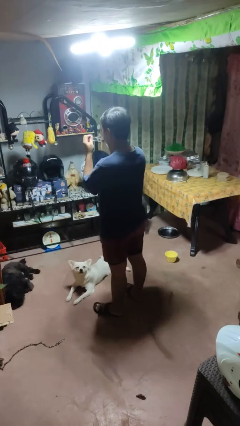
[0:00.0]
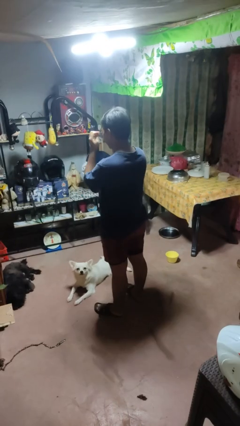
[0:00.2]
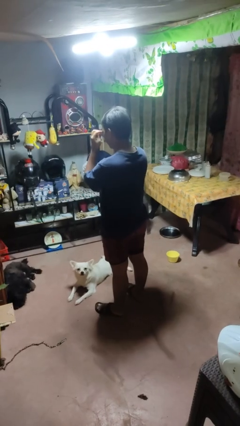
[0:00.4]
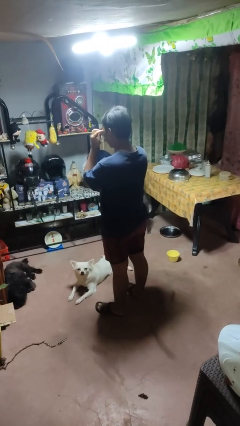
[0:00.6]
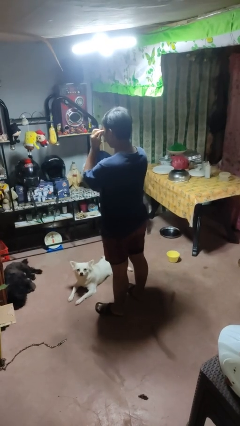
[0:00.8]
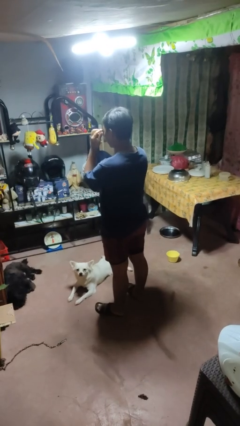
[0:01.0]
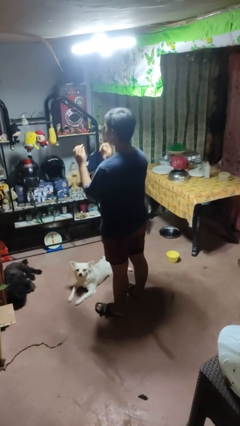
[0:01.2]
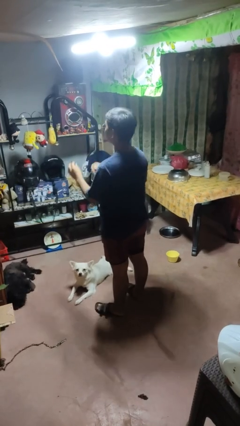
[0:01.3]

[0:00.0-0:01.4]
person puts on sunglasses

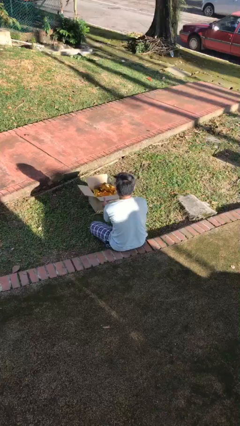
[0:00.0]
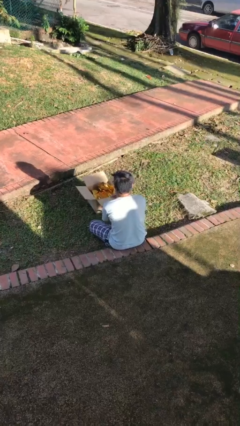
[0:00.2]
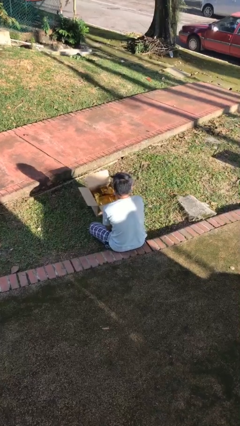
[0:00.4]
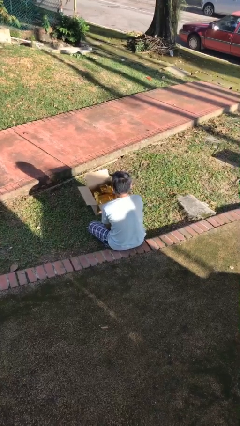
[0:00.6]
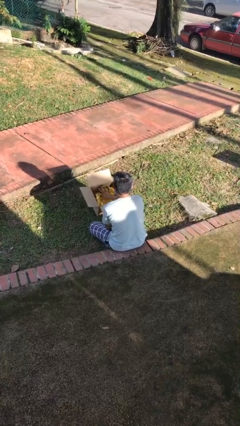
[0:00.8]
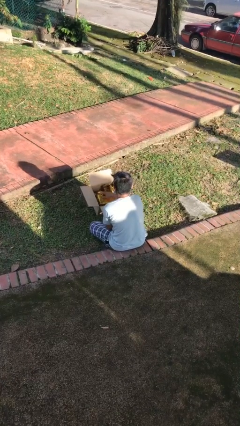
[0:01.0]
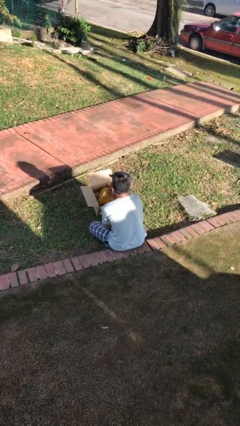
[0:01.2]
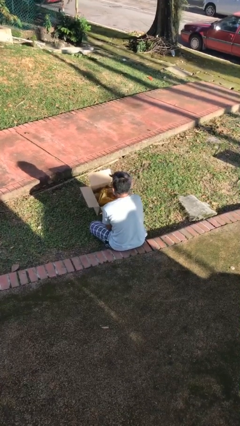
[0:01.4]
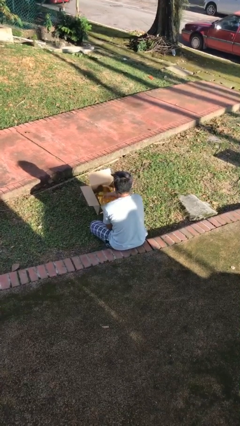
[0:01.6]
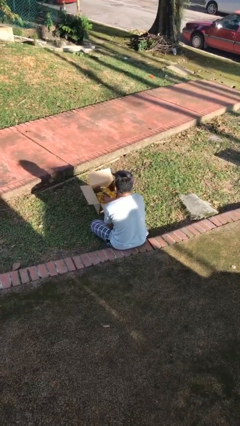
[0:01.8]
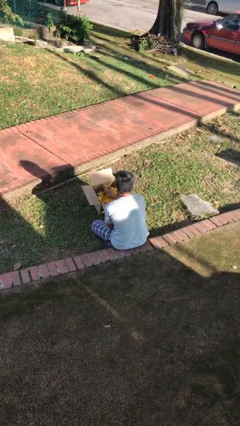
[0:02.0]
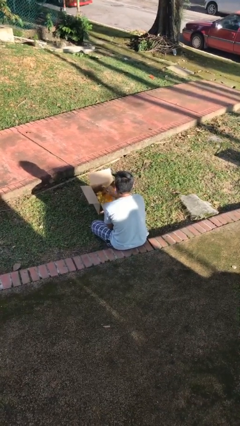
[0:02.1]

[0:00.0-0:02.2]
person searches in box

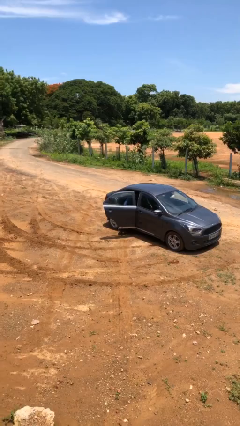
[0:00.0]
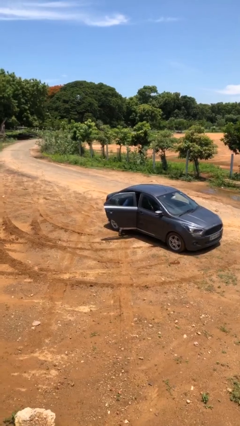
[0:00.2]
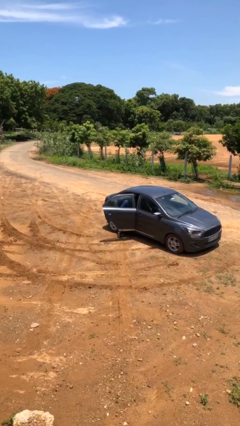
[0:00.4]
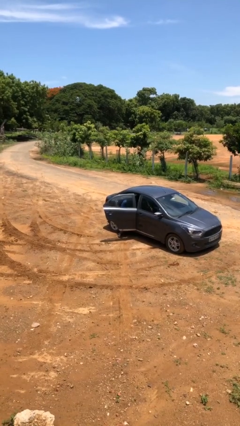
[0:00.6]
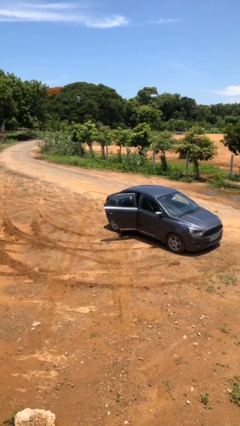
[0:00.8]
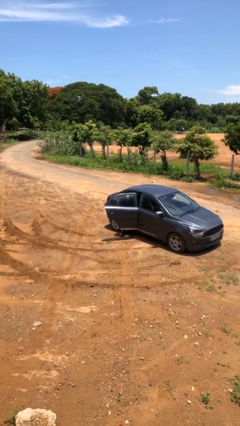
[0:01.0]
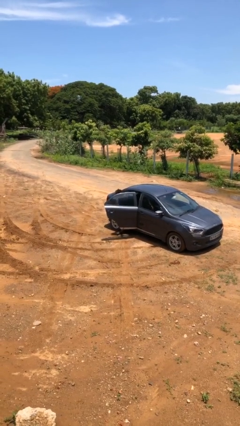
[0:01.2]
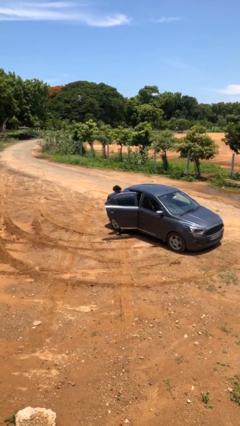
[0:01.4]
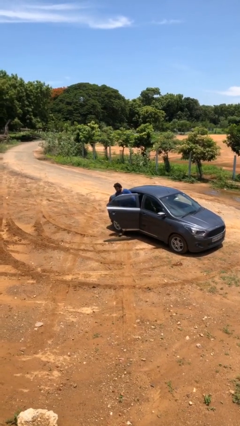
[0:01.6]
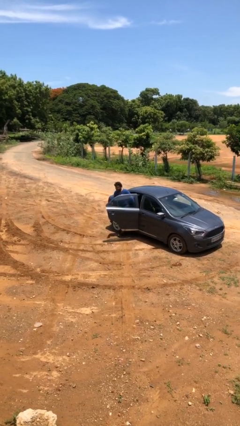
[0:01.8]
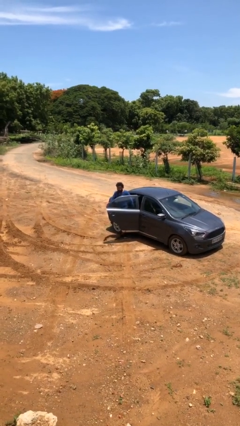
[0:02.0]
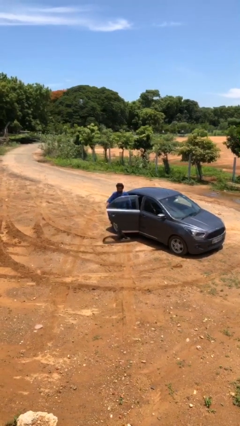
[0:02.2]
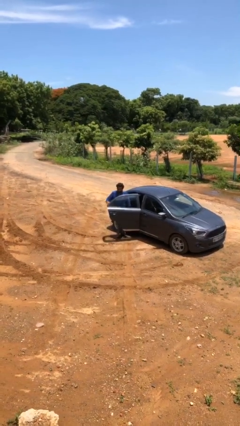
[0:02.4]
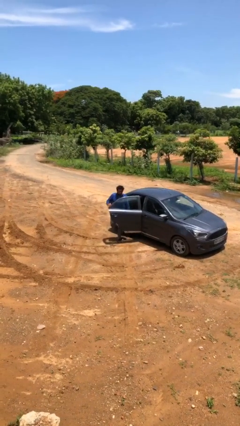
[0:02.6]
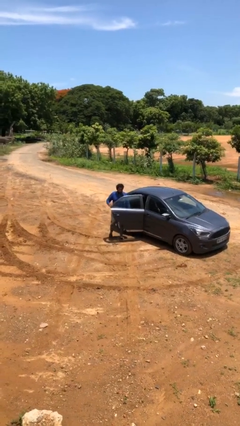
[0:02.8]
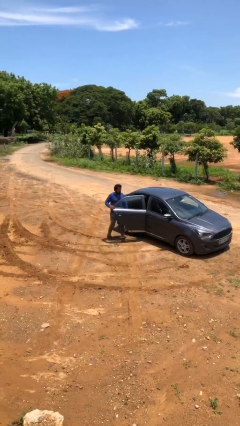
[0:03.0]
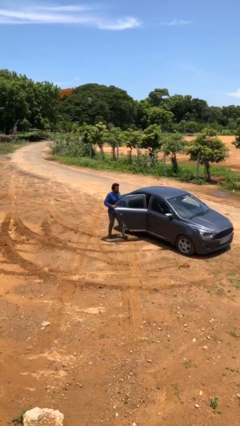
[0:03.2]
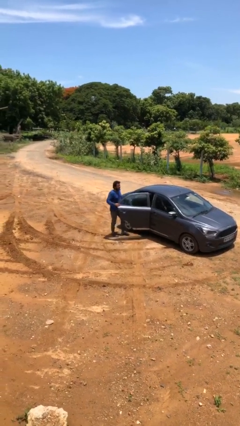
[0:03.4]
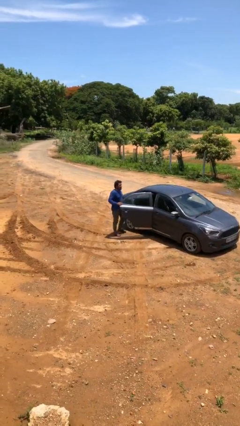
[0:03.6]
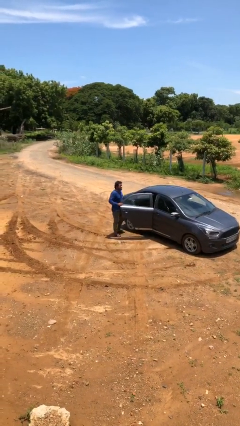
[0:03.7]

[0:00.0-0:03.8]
person exits car

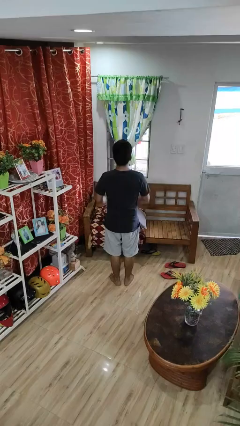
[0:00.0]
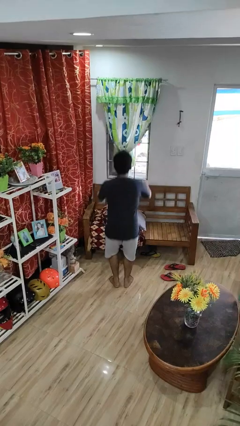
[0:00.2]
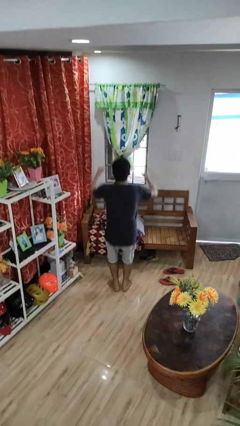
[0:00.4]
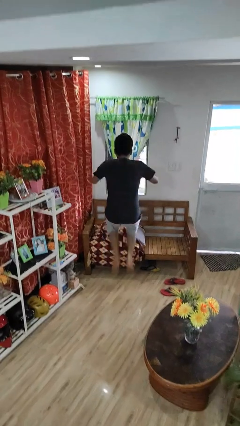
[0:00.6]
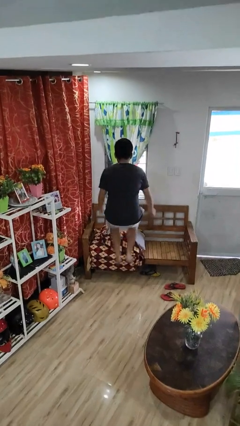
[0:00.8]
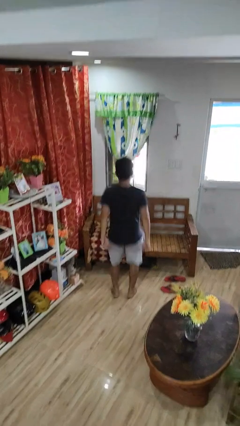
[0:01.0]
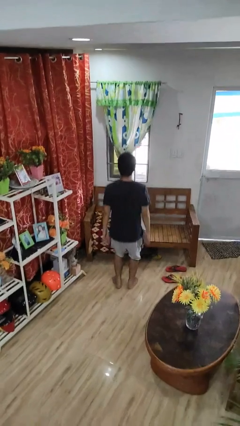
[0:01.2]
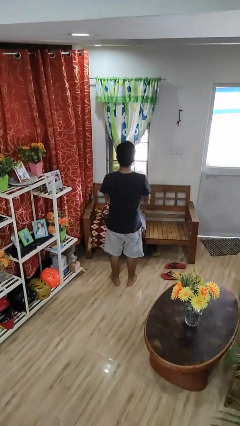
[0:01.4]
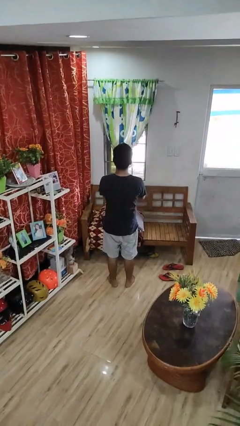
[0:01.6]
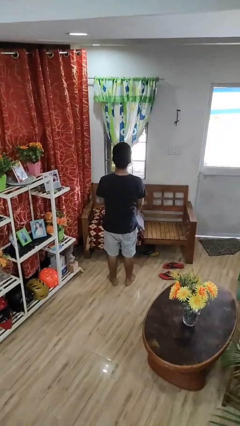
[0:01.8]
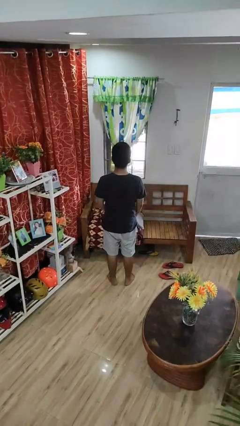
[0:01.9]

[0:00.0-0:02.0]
person jumps

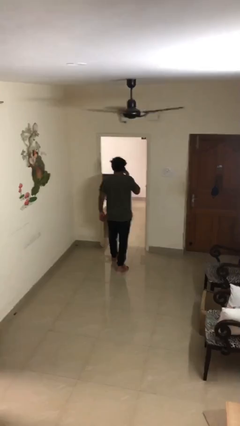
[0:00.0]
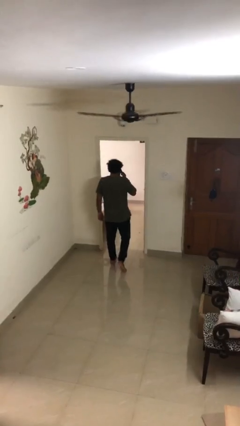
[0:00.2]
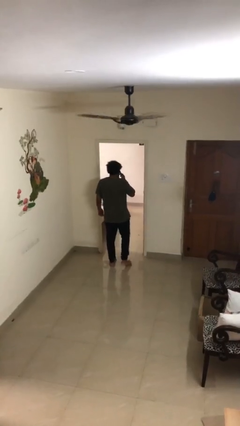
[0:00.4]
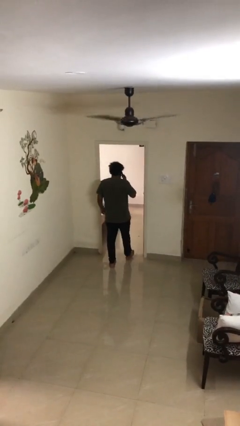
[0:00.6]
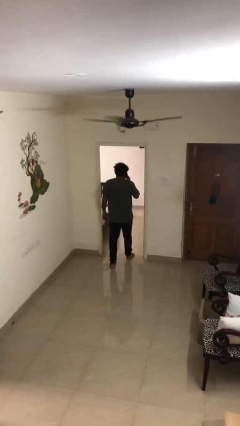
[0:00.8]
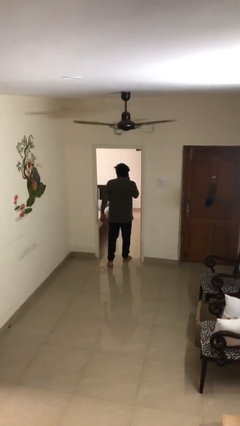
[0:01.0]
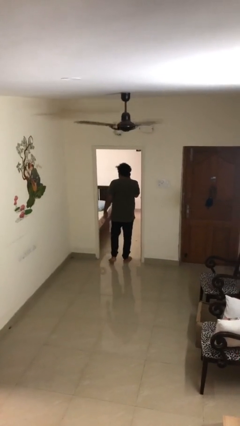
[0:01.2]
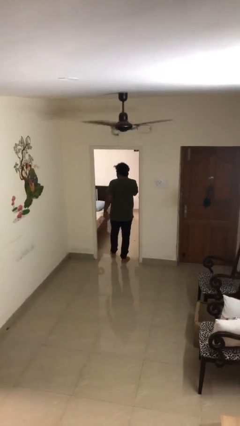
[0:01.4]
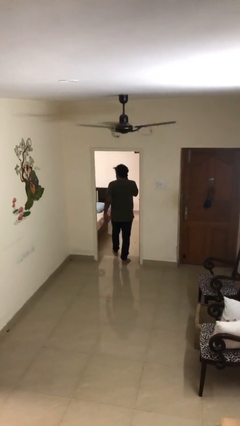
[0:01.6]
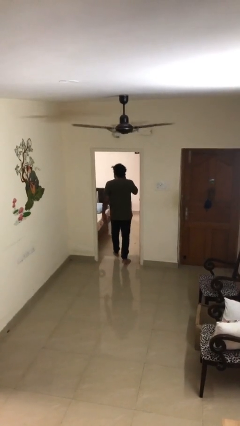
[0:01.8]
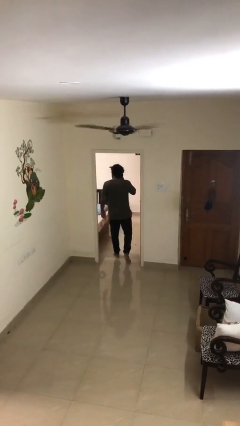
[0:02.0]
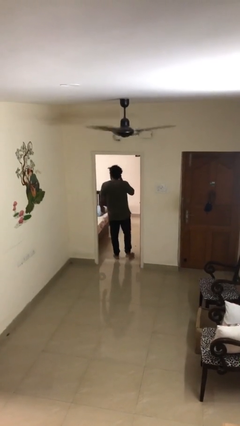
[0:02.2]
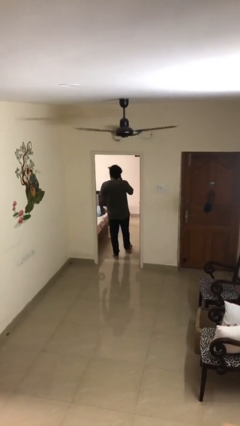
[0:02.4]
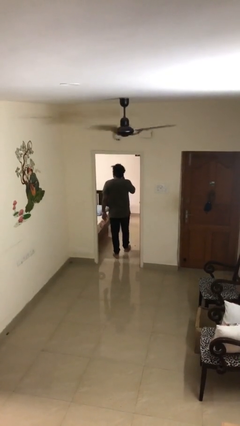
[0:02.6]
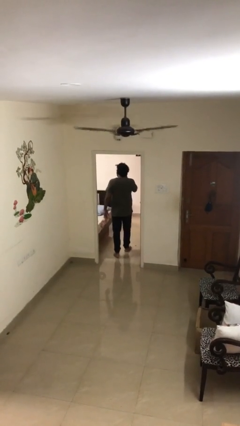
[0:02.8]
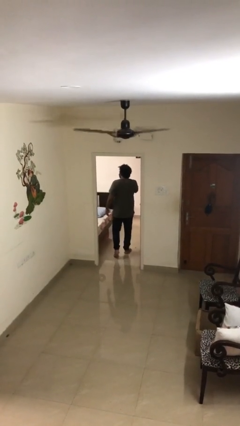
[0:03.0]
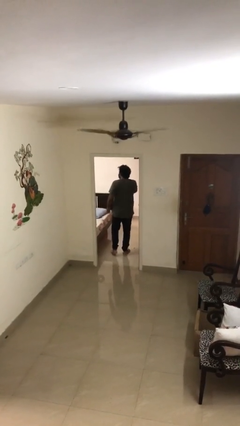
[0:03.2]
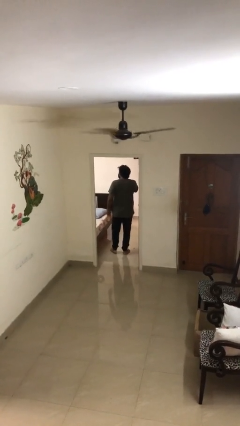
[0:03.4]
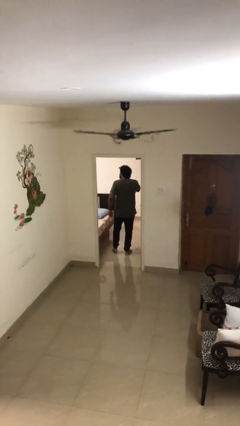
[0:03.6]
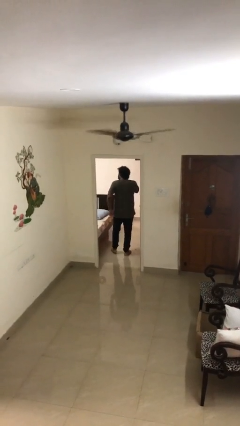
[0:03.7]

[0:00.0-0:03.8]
person exits scene through structure

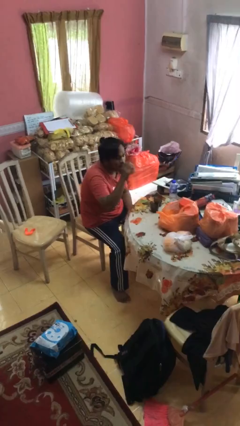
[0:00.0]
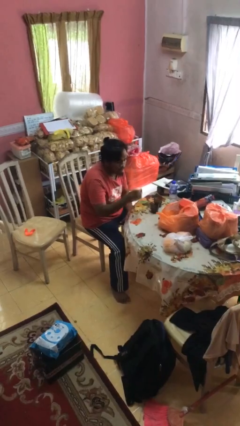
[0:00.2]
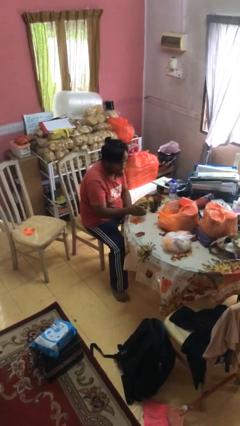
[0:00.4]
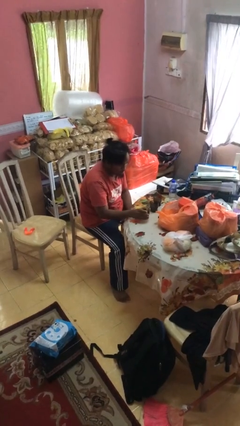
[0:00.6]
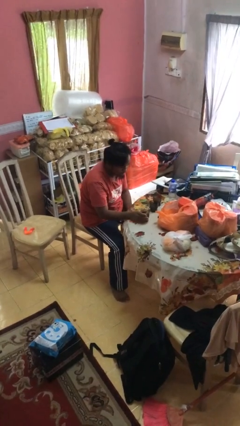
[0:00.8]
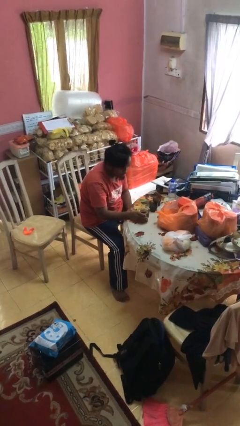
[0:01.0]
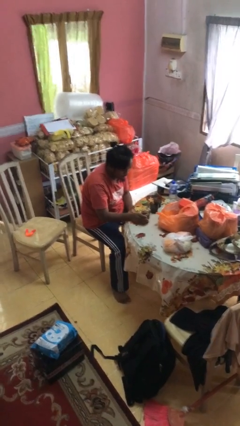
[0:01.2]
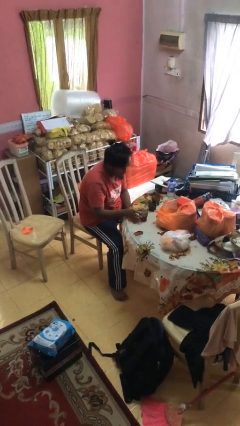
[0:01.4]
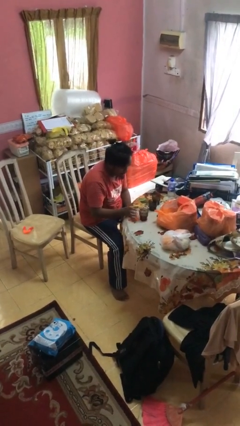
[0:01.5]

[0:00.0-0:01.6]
person puts down object on table

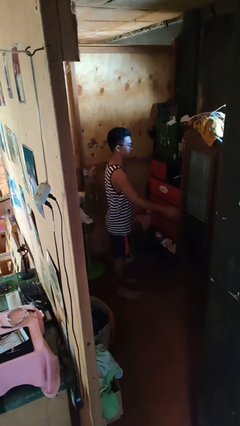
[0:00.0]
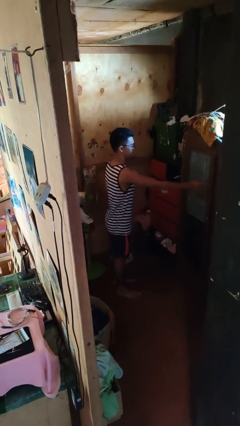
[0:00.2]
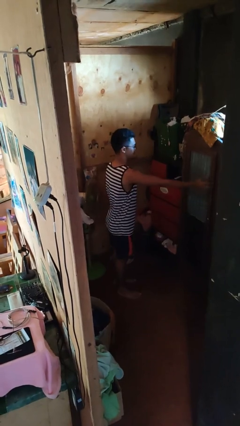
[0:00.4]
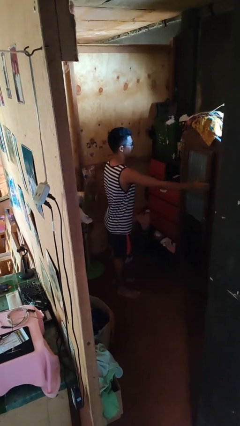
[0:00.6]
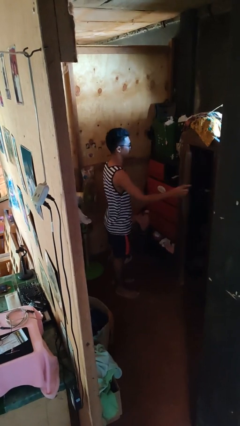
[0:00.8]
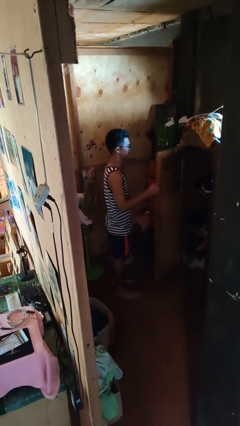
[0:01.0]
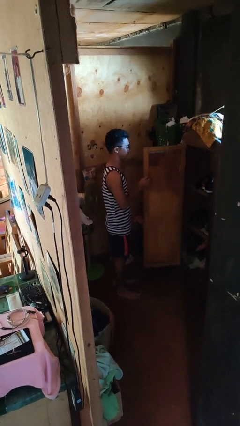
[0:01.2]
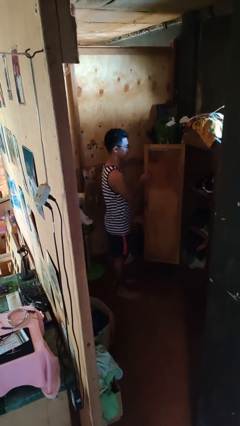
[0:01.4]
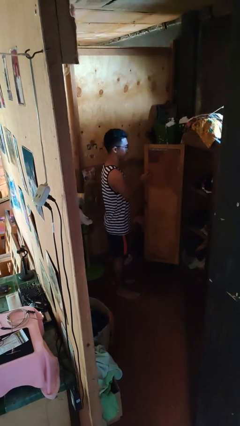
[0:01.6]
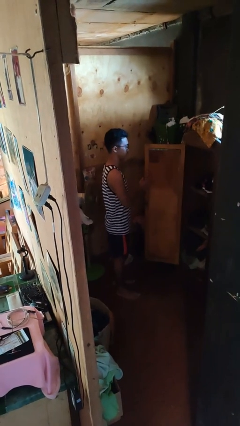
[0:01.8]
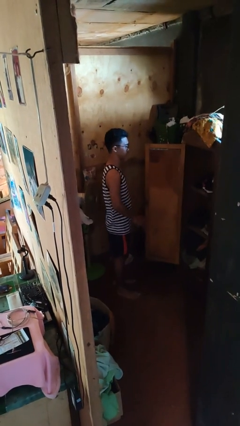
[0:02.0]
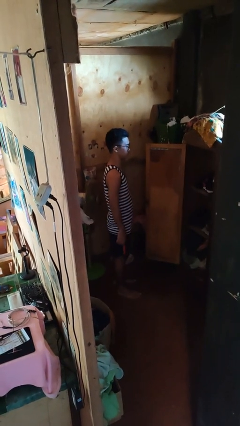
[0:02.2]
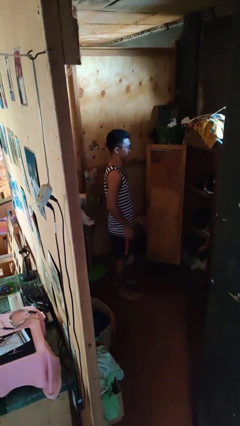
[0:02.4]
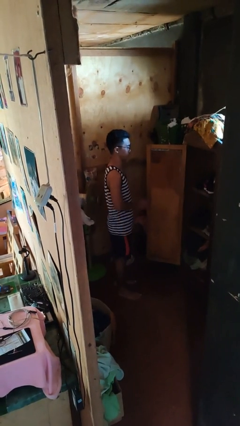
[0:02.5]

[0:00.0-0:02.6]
person opens closet door
